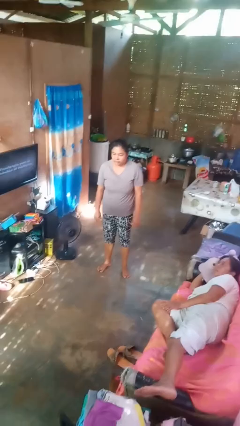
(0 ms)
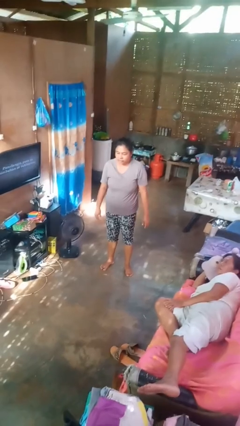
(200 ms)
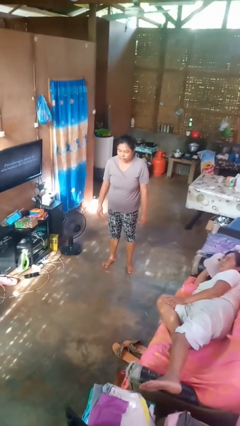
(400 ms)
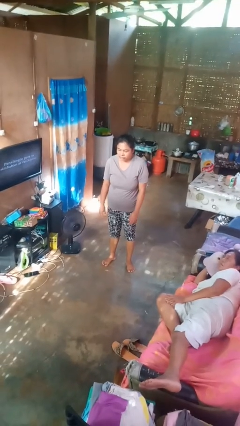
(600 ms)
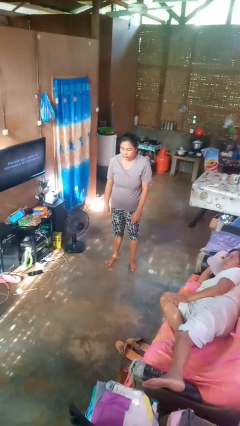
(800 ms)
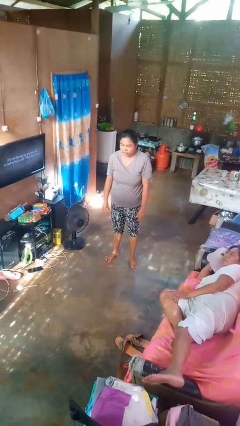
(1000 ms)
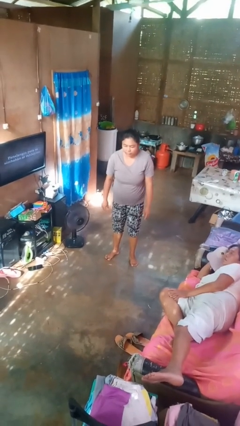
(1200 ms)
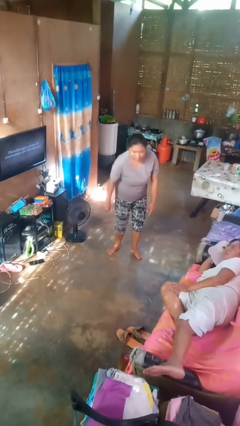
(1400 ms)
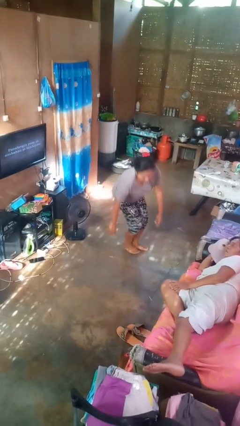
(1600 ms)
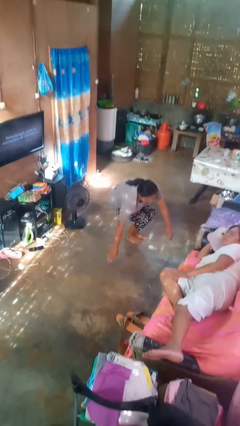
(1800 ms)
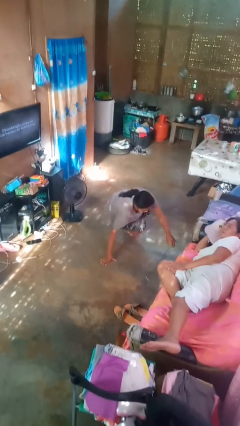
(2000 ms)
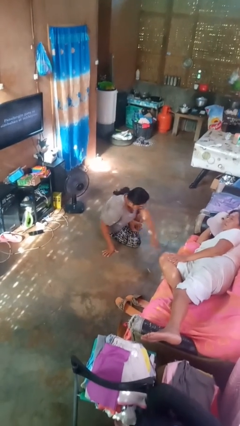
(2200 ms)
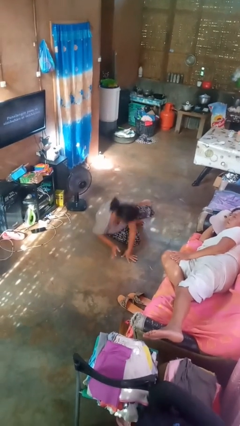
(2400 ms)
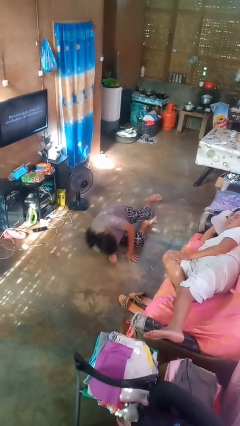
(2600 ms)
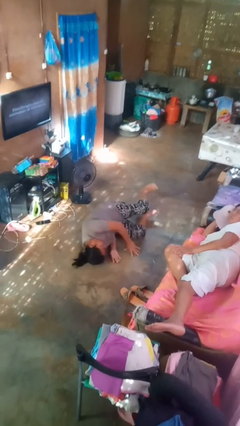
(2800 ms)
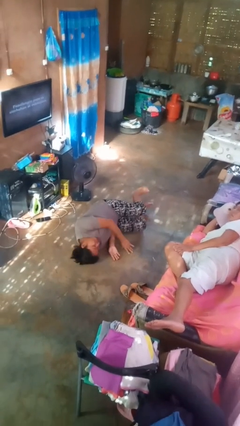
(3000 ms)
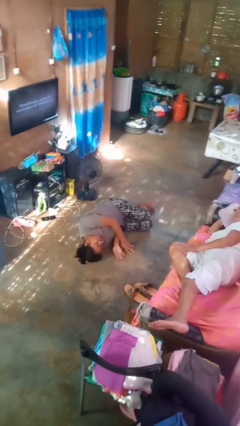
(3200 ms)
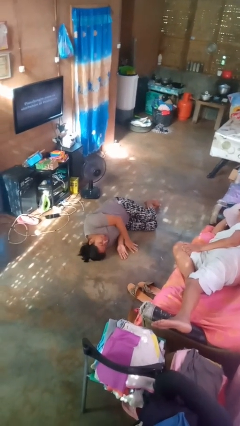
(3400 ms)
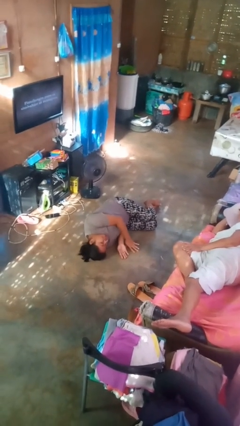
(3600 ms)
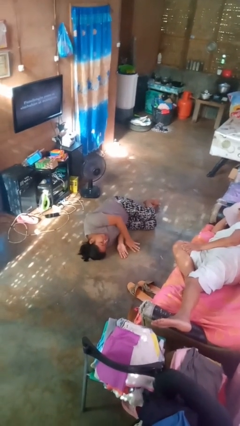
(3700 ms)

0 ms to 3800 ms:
person falls while standing

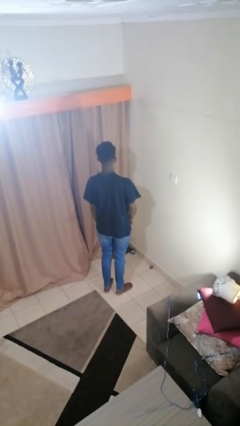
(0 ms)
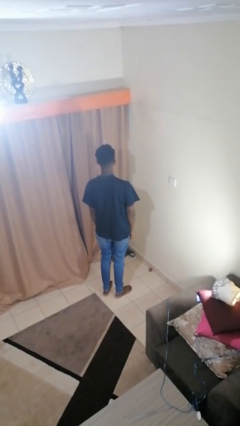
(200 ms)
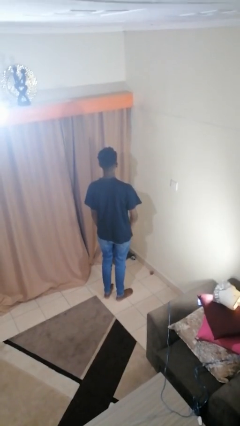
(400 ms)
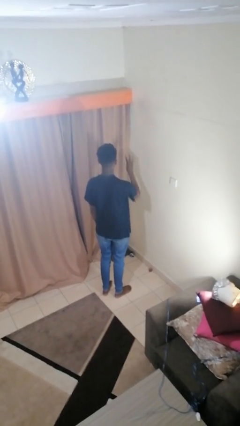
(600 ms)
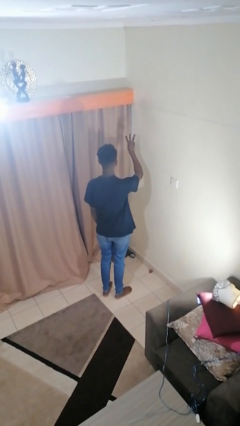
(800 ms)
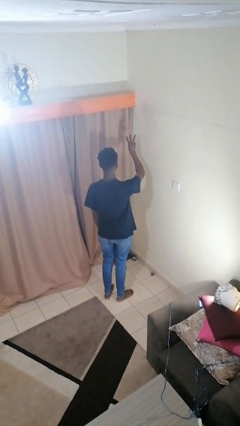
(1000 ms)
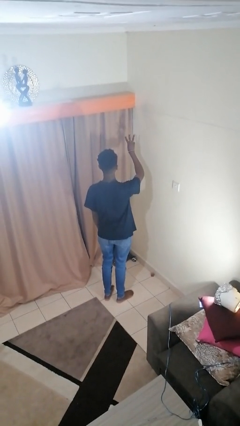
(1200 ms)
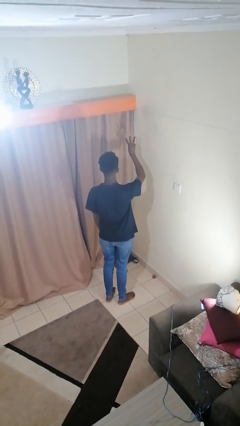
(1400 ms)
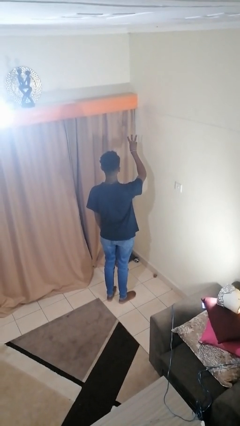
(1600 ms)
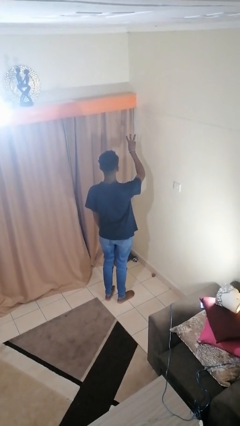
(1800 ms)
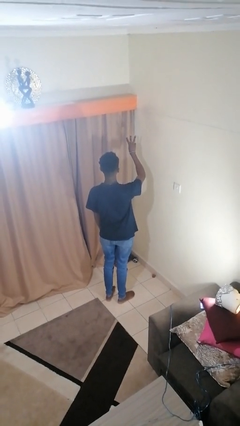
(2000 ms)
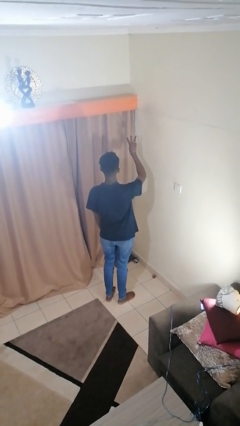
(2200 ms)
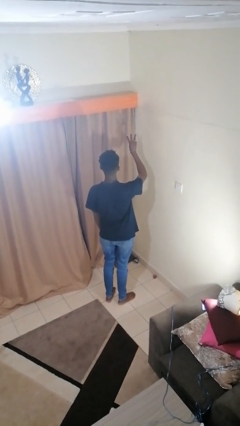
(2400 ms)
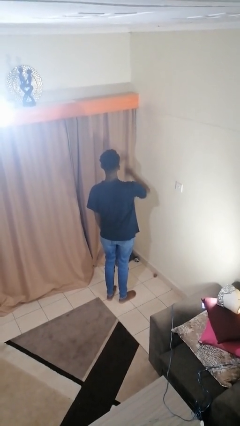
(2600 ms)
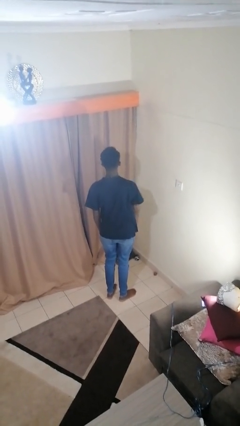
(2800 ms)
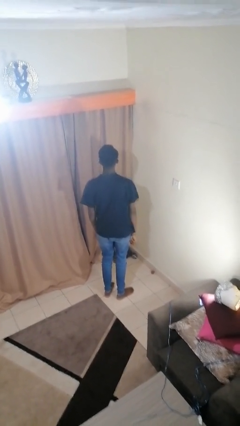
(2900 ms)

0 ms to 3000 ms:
person gestures number three

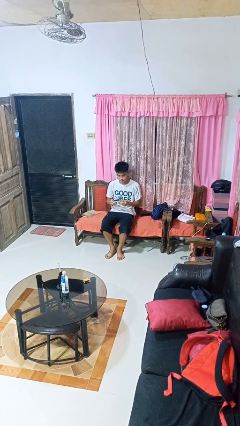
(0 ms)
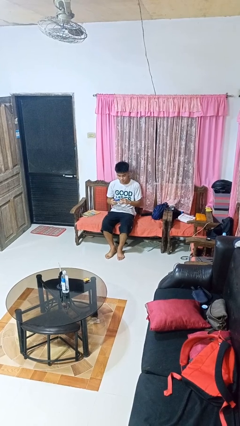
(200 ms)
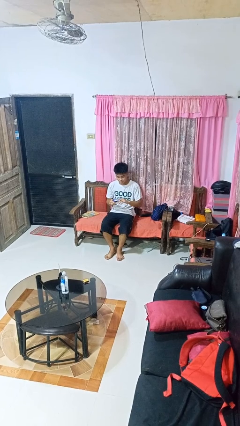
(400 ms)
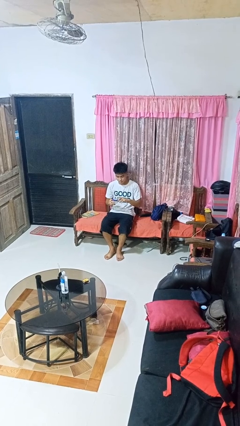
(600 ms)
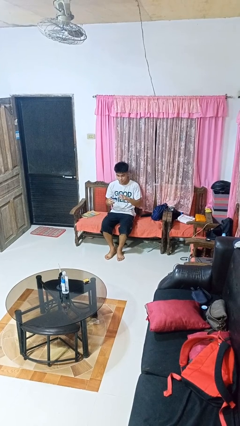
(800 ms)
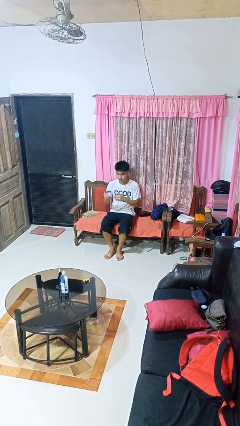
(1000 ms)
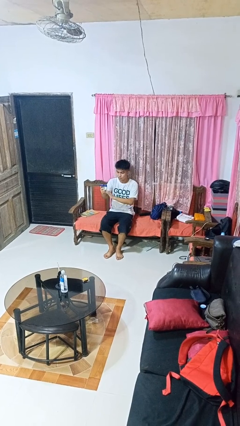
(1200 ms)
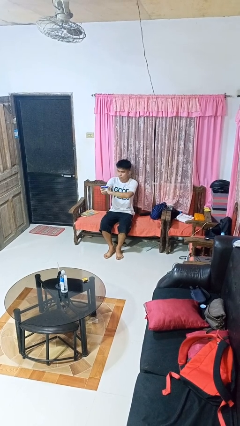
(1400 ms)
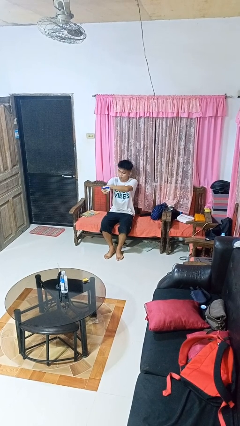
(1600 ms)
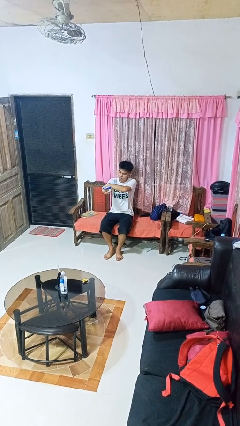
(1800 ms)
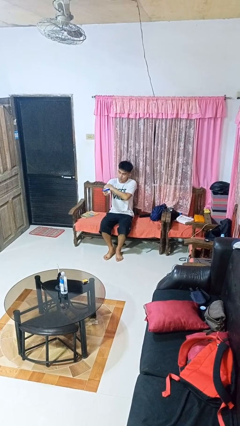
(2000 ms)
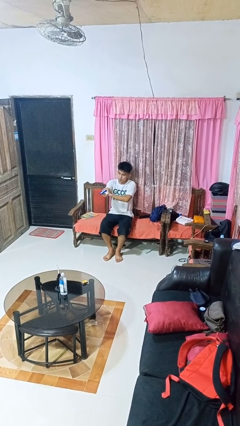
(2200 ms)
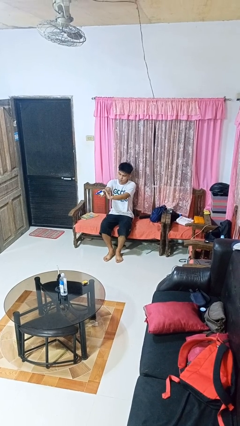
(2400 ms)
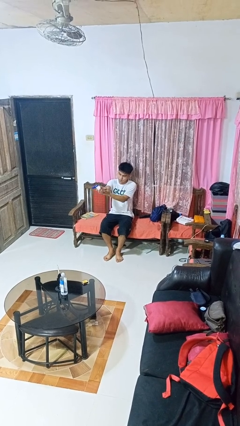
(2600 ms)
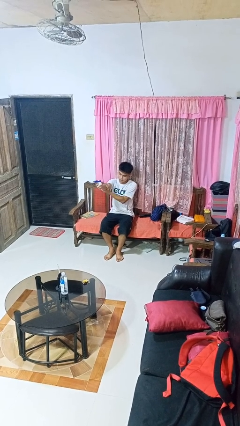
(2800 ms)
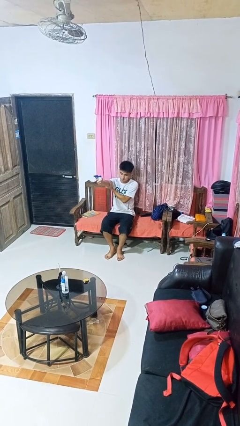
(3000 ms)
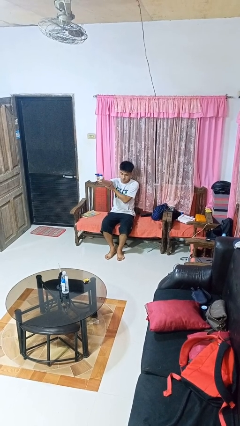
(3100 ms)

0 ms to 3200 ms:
person applies sunscreen

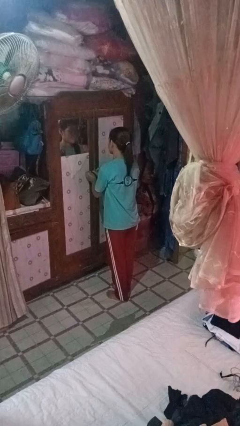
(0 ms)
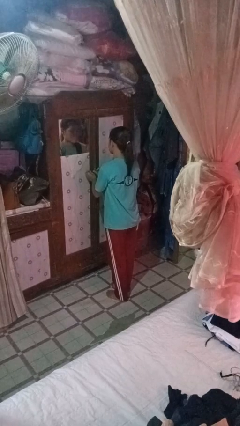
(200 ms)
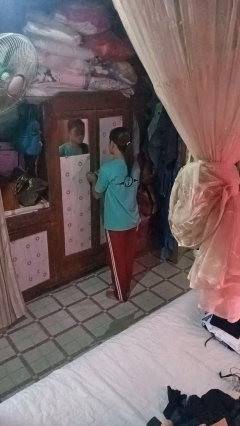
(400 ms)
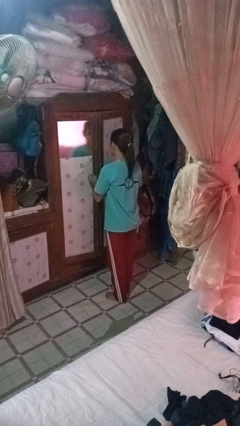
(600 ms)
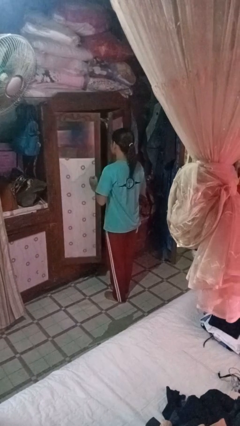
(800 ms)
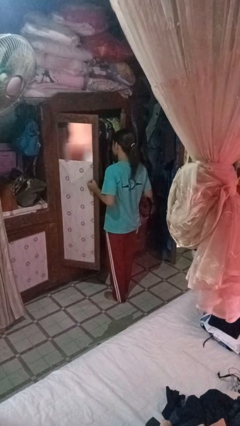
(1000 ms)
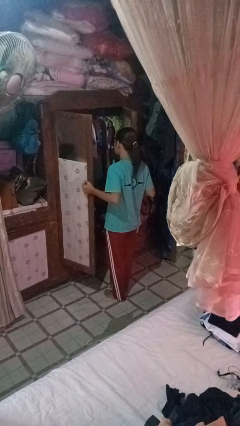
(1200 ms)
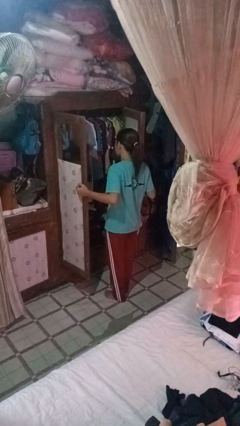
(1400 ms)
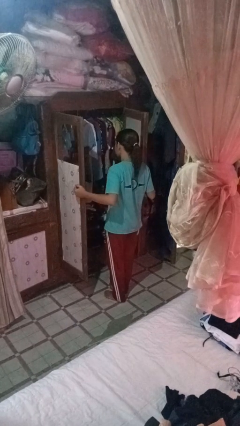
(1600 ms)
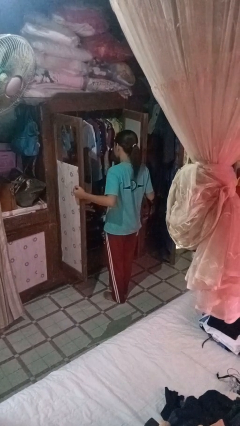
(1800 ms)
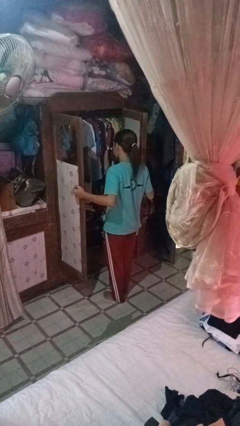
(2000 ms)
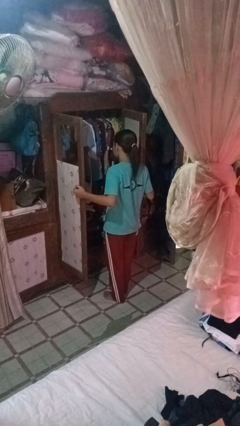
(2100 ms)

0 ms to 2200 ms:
person opens closet door

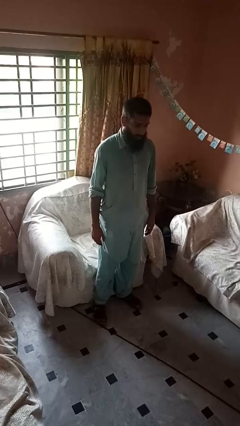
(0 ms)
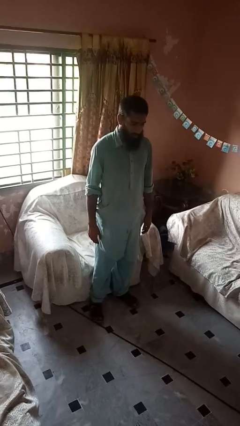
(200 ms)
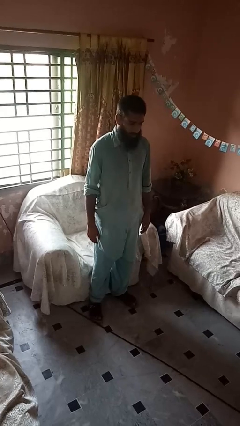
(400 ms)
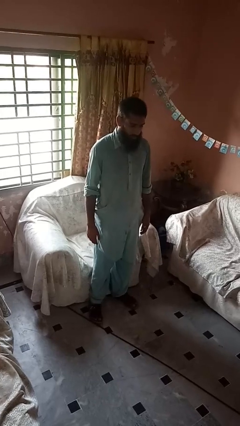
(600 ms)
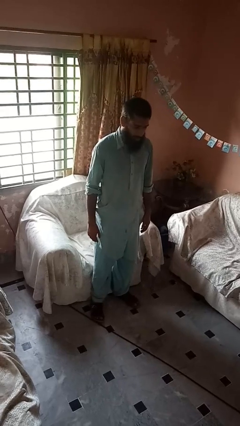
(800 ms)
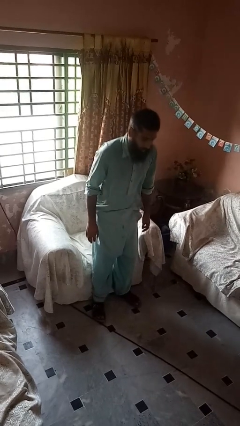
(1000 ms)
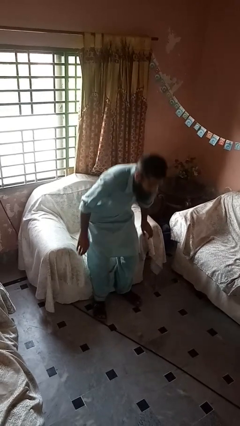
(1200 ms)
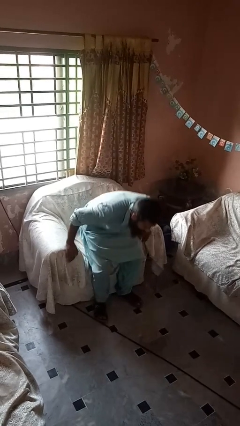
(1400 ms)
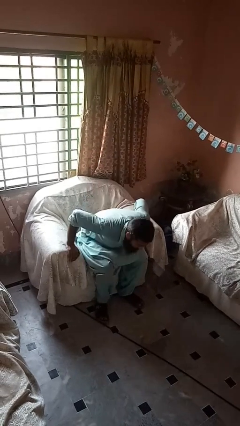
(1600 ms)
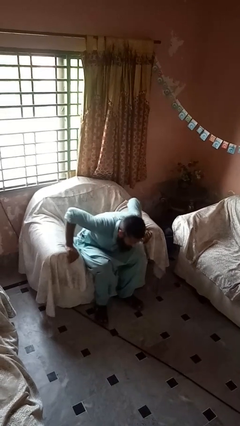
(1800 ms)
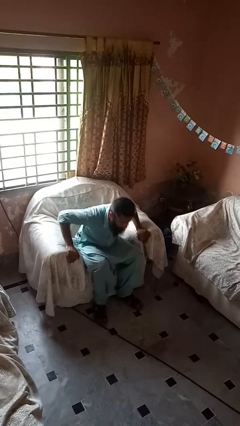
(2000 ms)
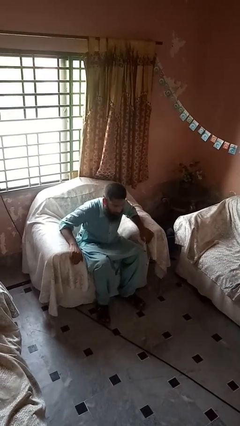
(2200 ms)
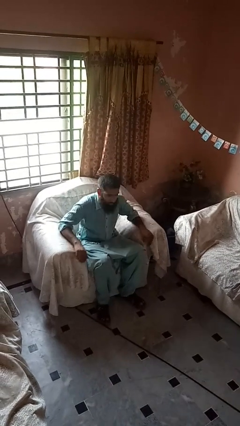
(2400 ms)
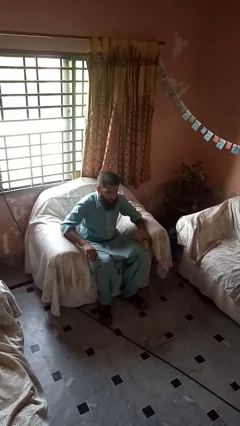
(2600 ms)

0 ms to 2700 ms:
person sits down

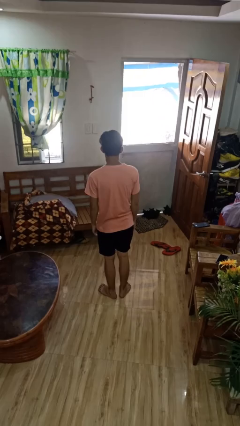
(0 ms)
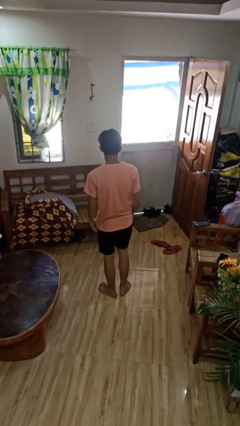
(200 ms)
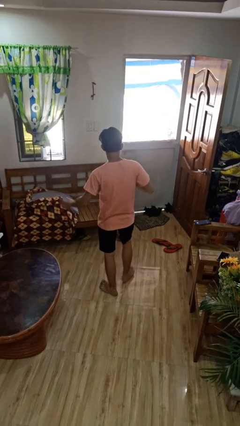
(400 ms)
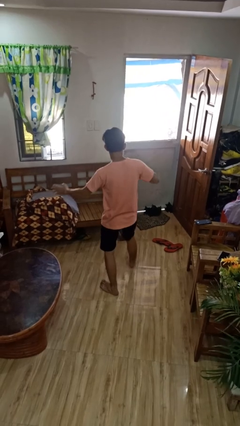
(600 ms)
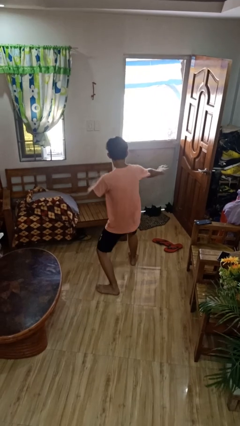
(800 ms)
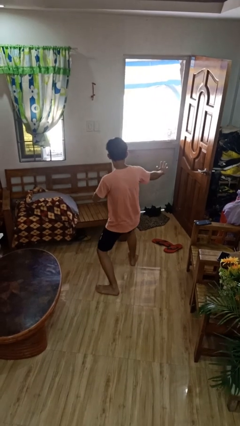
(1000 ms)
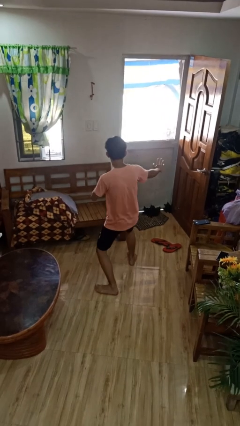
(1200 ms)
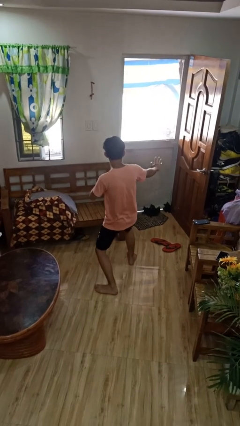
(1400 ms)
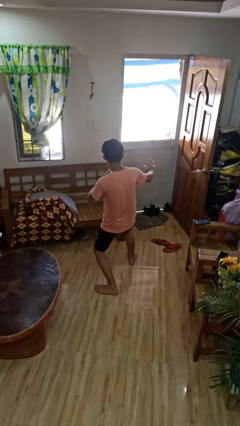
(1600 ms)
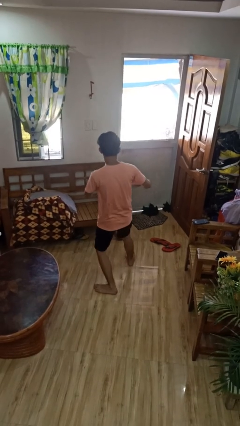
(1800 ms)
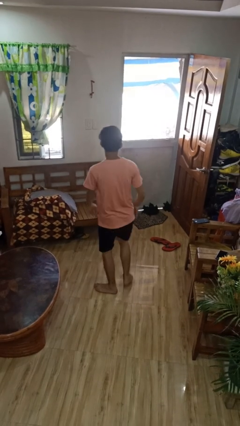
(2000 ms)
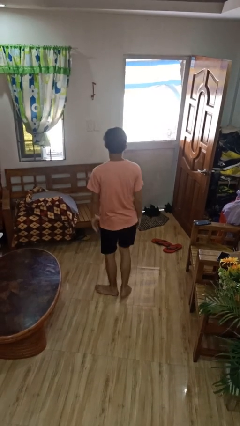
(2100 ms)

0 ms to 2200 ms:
person karate chop

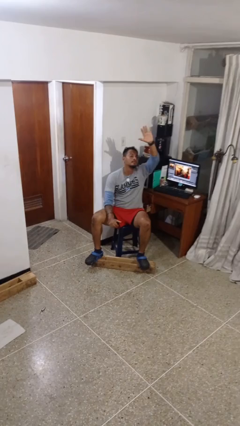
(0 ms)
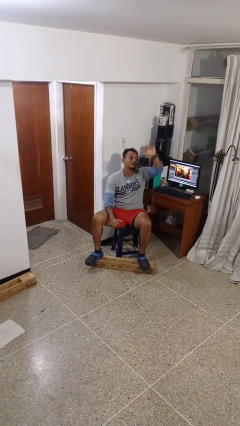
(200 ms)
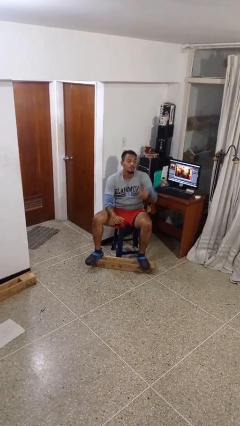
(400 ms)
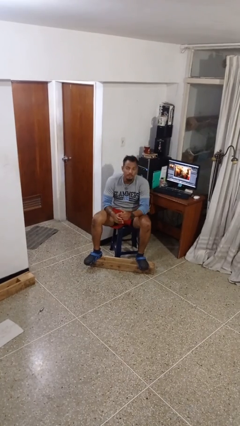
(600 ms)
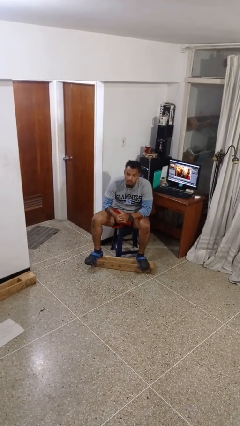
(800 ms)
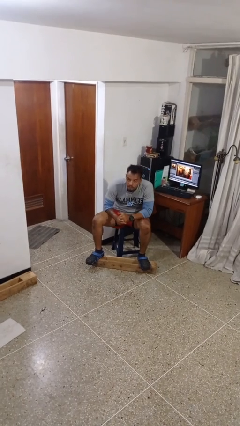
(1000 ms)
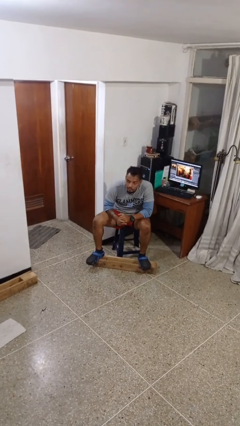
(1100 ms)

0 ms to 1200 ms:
person gestures lower hand
